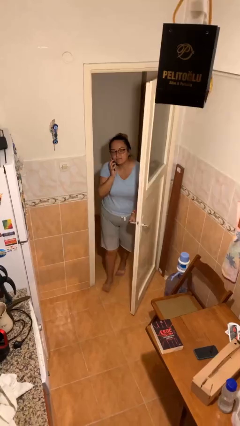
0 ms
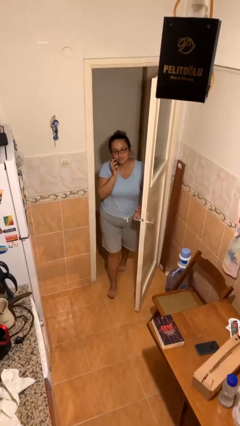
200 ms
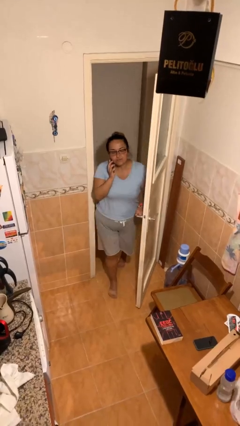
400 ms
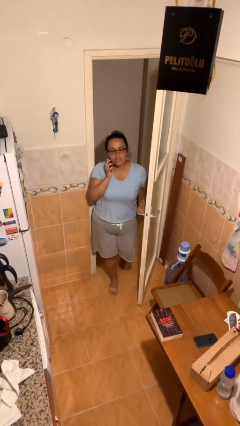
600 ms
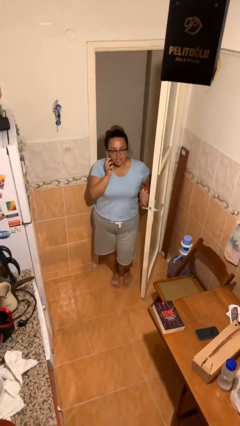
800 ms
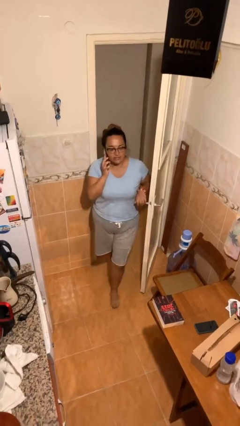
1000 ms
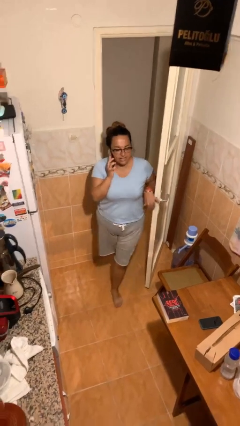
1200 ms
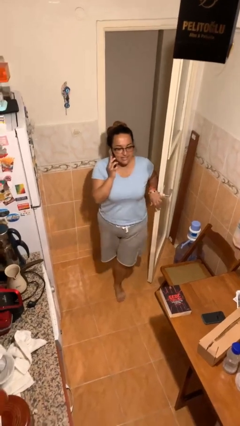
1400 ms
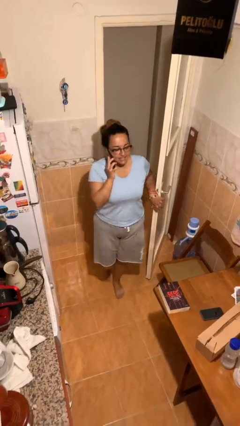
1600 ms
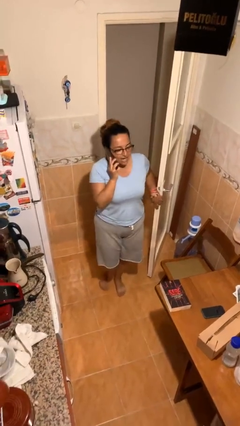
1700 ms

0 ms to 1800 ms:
person enters scene through structure

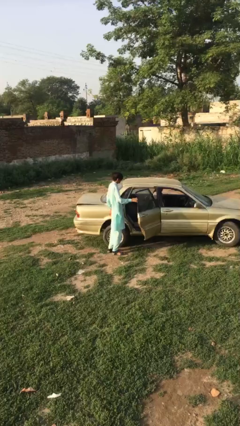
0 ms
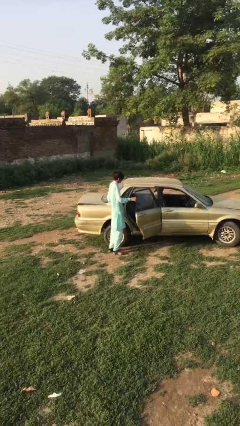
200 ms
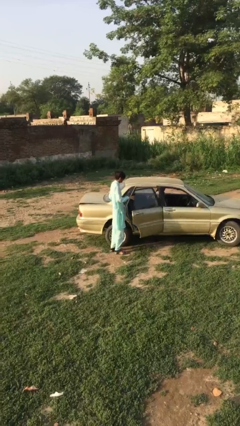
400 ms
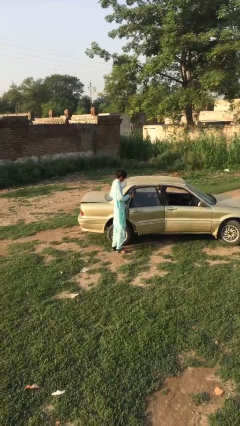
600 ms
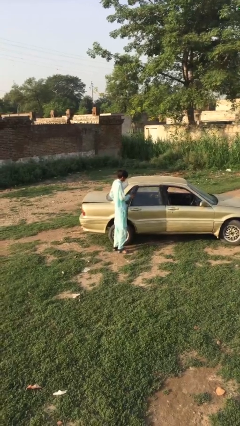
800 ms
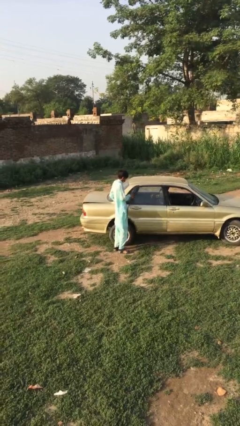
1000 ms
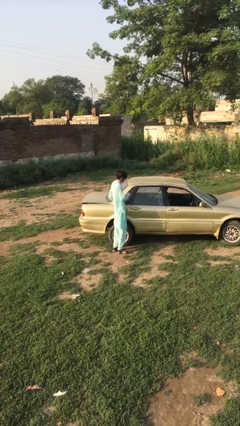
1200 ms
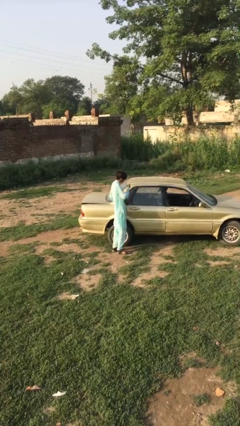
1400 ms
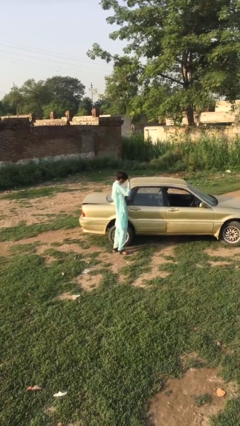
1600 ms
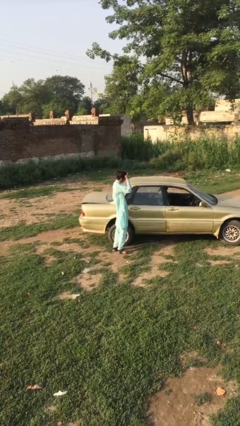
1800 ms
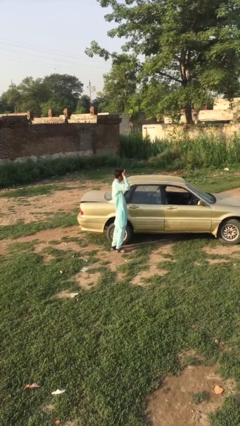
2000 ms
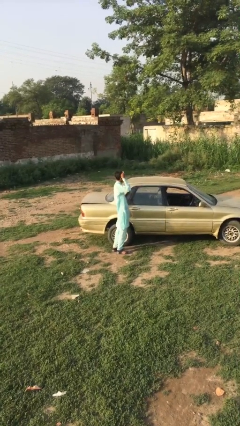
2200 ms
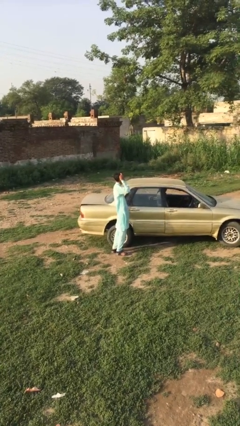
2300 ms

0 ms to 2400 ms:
person closes car door

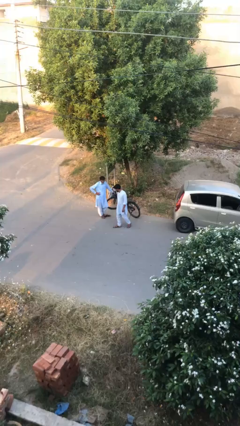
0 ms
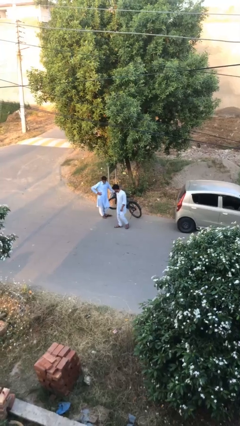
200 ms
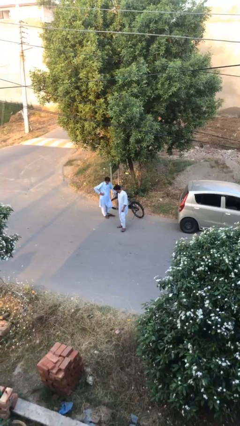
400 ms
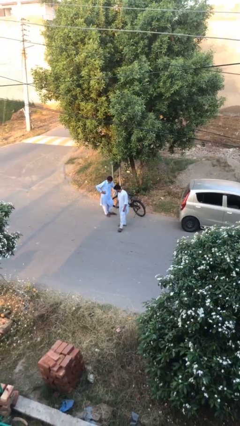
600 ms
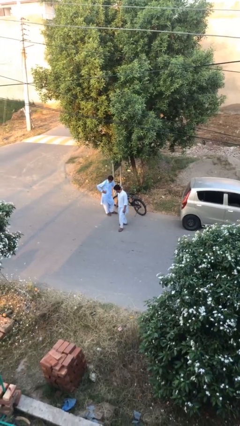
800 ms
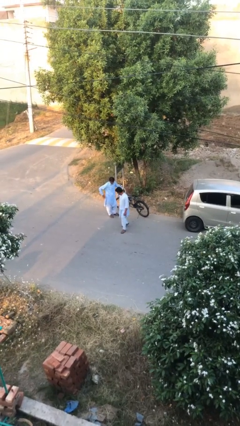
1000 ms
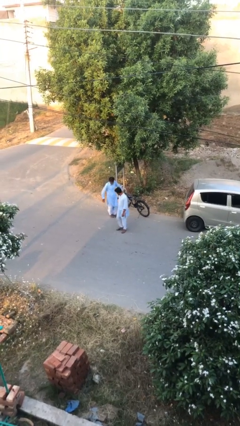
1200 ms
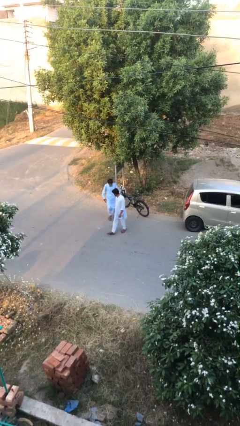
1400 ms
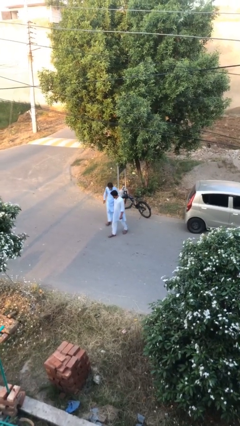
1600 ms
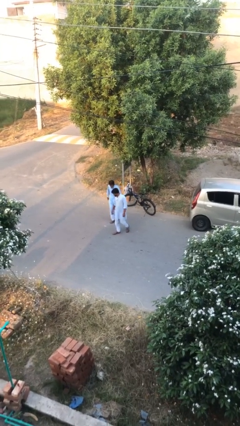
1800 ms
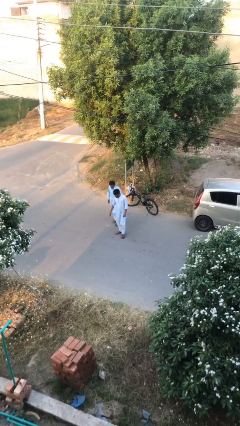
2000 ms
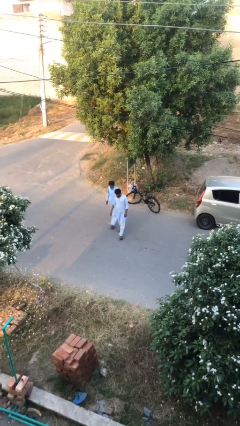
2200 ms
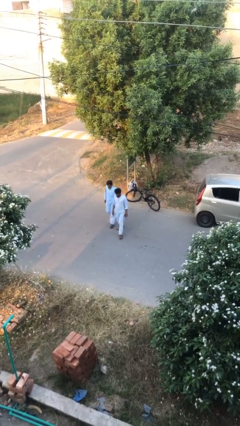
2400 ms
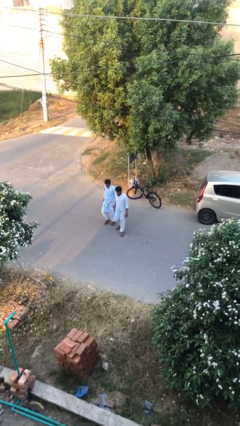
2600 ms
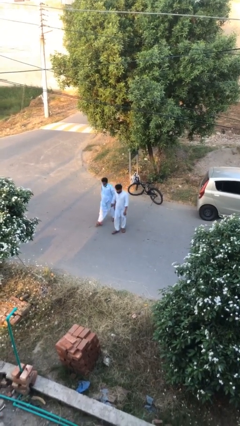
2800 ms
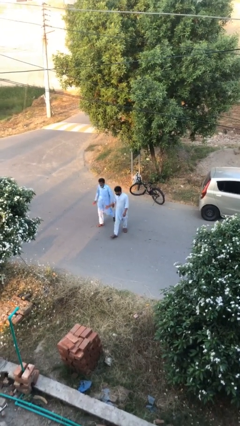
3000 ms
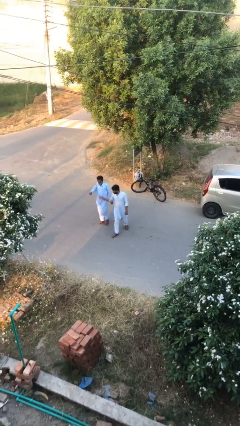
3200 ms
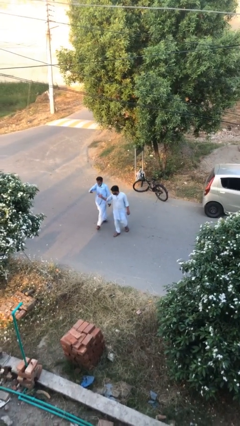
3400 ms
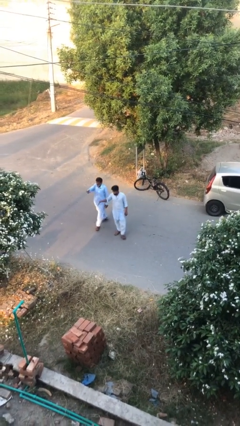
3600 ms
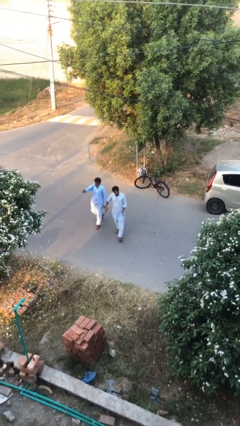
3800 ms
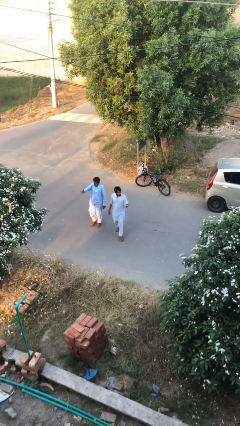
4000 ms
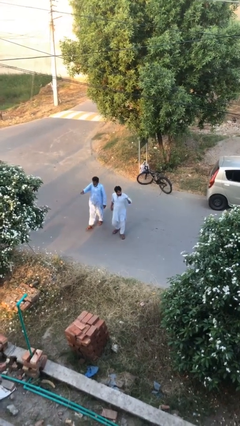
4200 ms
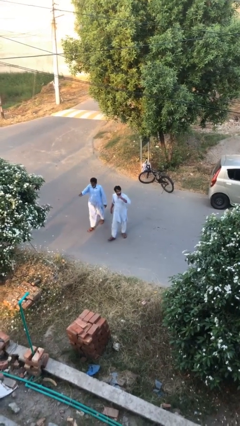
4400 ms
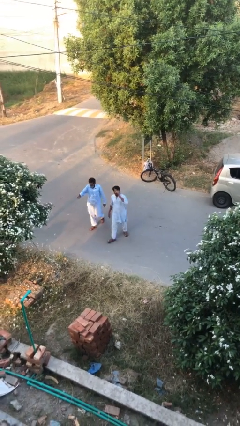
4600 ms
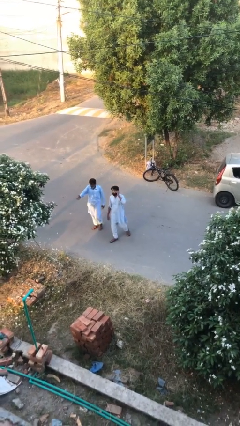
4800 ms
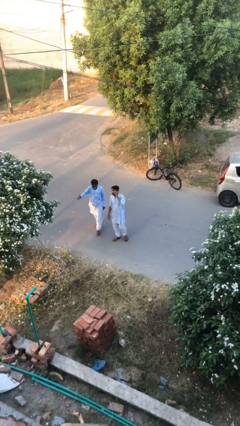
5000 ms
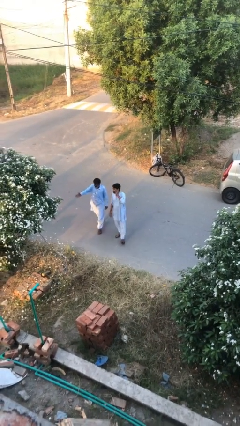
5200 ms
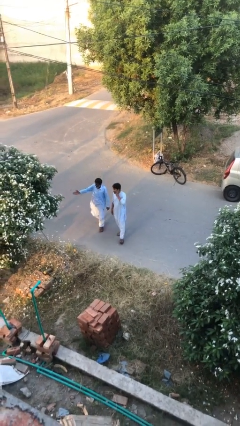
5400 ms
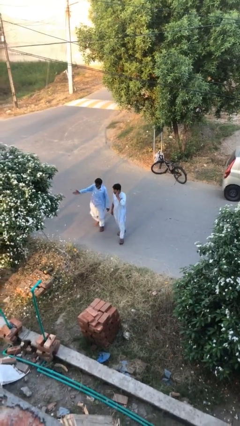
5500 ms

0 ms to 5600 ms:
person talks to person
